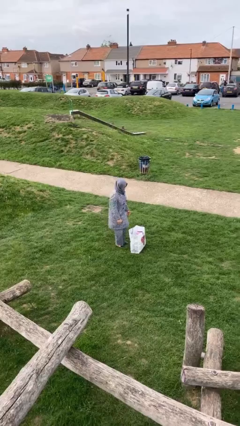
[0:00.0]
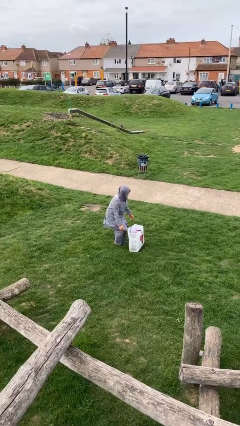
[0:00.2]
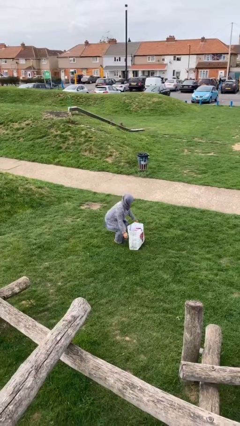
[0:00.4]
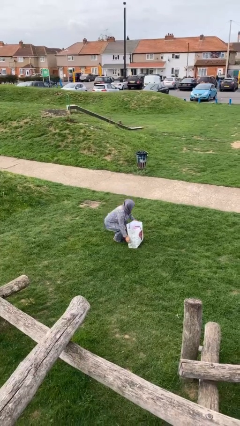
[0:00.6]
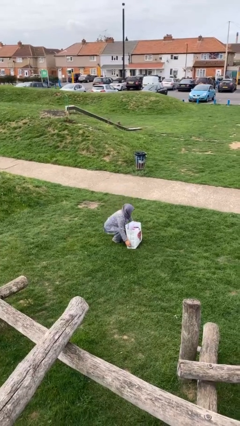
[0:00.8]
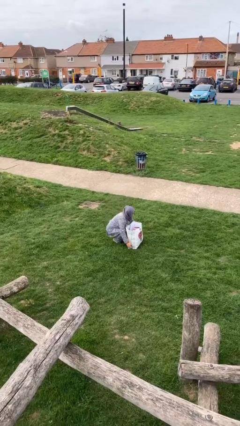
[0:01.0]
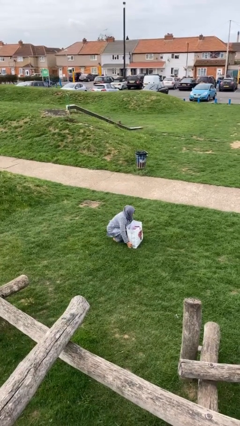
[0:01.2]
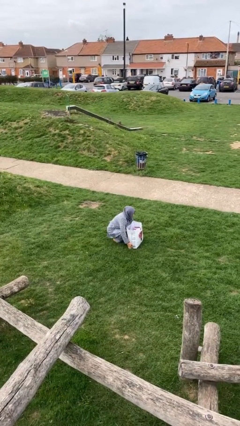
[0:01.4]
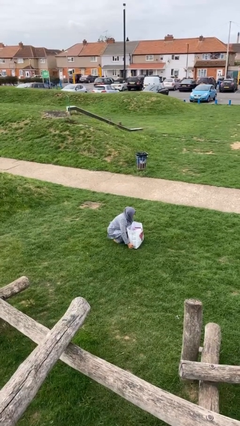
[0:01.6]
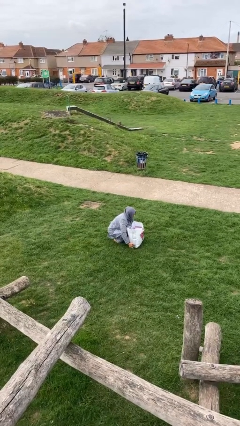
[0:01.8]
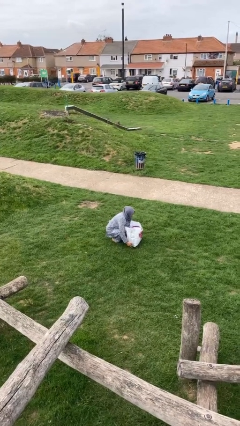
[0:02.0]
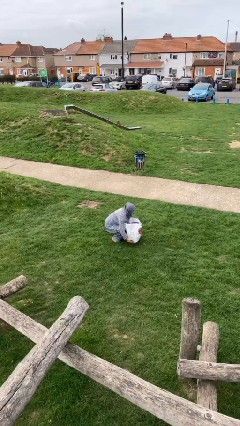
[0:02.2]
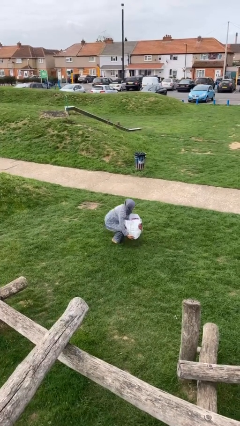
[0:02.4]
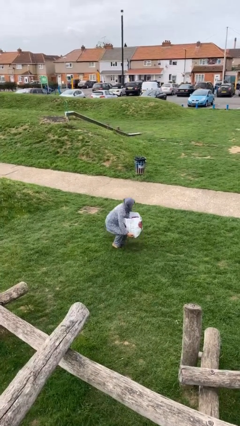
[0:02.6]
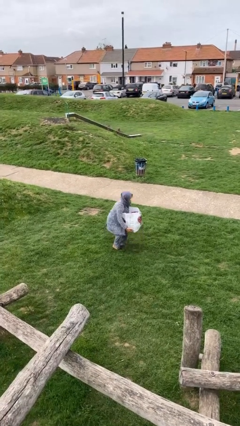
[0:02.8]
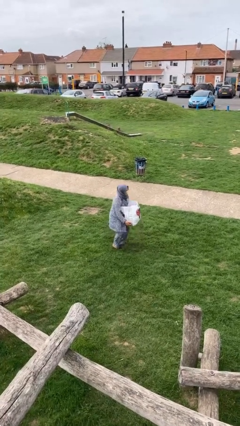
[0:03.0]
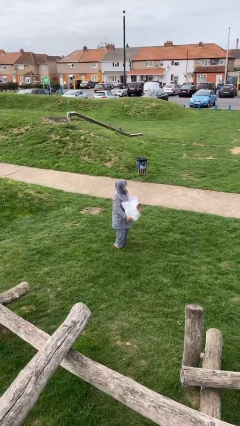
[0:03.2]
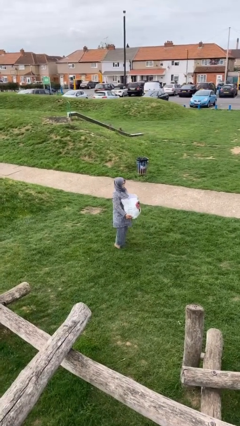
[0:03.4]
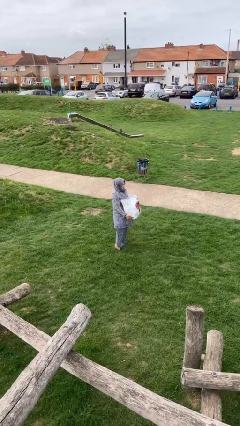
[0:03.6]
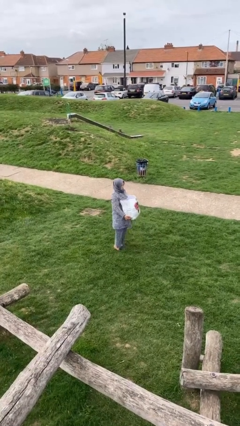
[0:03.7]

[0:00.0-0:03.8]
person picks up object from floor

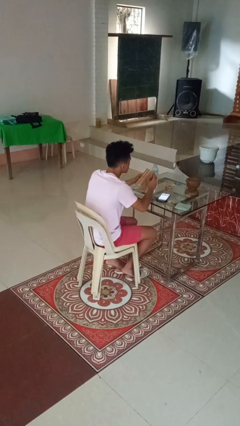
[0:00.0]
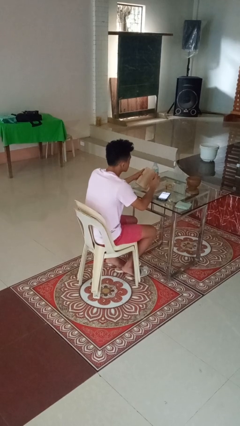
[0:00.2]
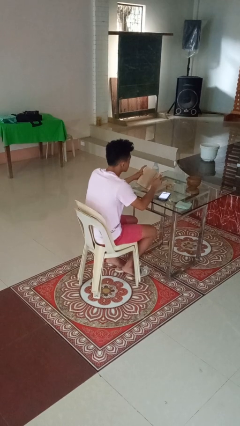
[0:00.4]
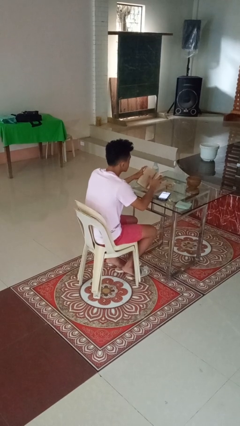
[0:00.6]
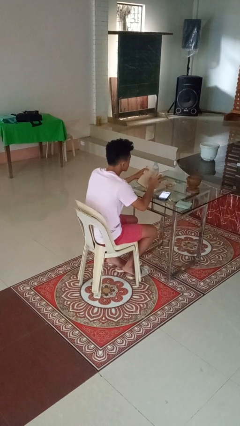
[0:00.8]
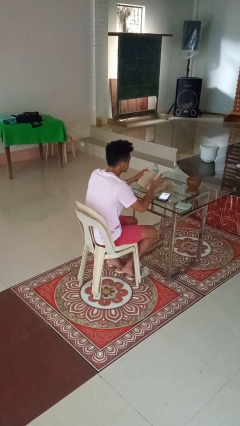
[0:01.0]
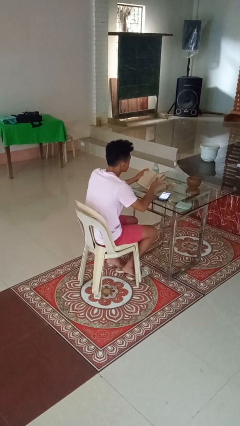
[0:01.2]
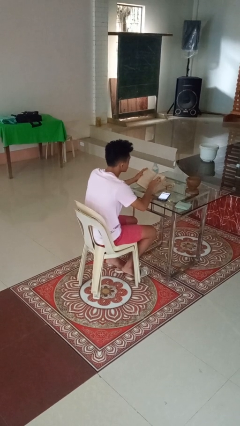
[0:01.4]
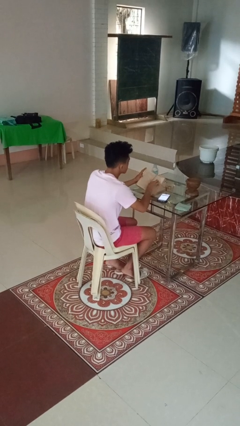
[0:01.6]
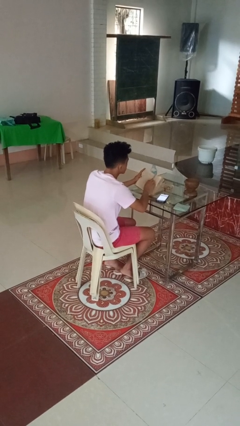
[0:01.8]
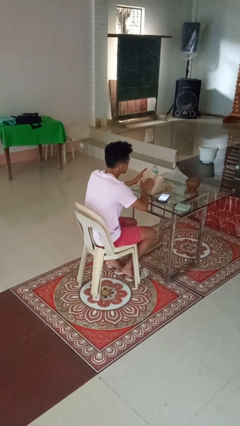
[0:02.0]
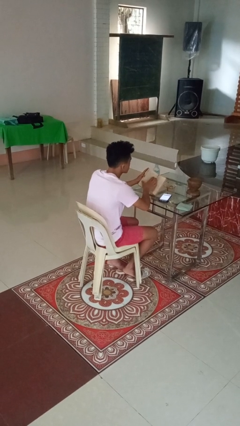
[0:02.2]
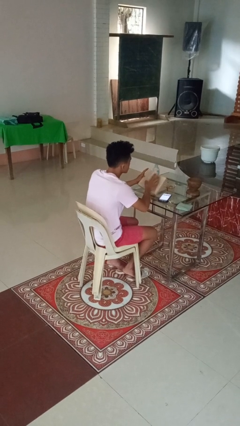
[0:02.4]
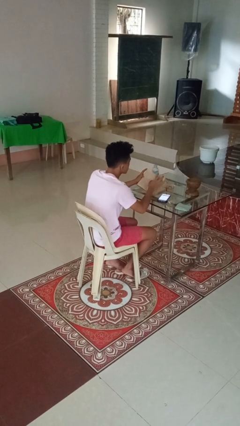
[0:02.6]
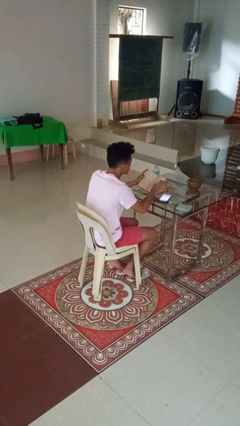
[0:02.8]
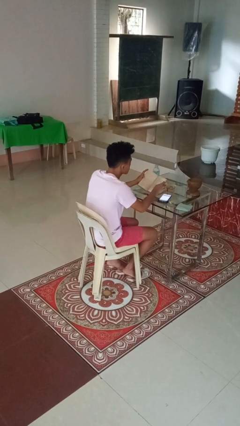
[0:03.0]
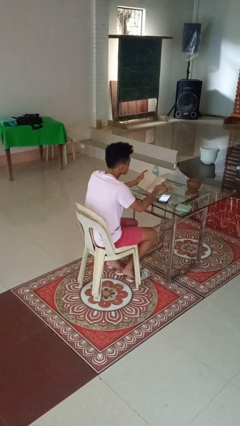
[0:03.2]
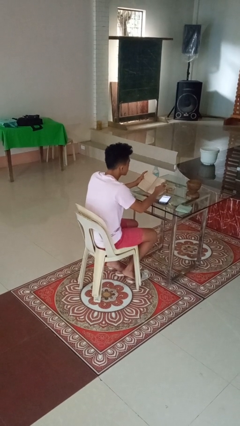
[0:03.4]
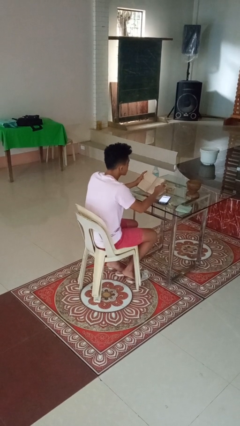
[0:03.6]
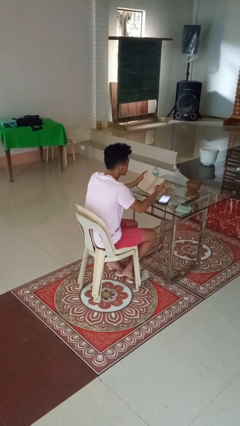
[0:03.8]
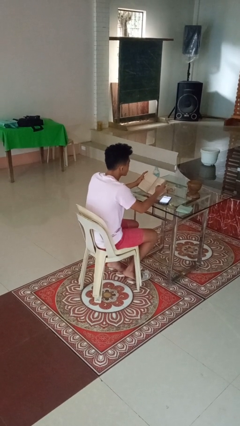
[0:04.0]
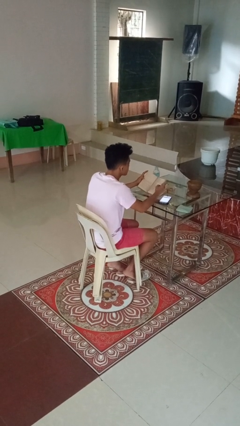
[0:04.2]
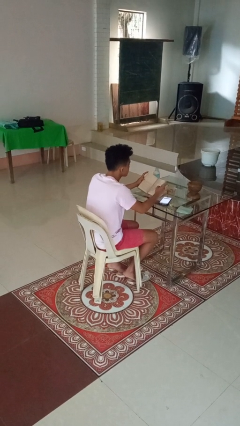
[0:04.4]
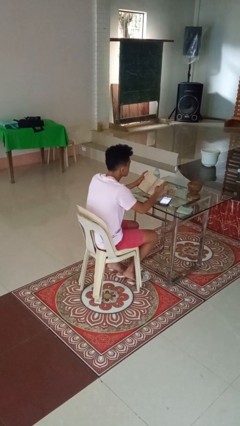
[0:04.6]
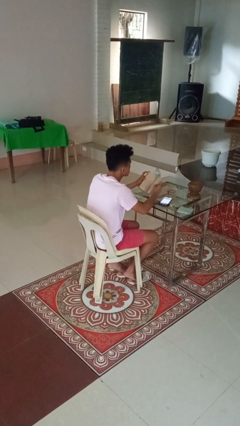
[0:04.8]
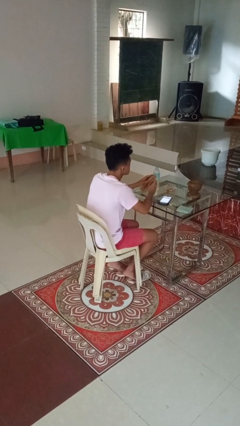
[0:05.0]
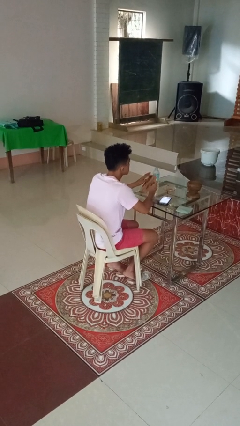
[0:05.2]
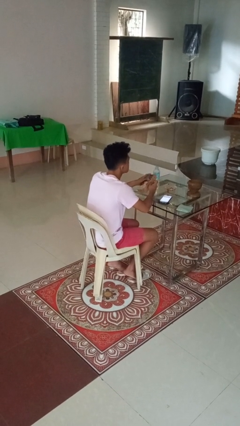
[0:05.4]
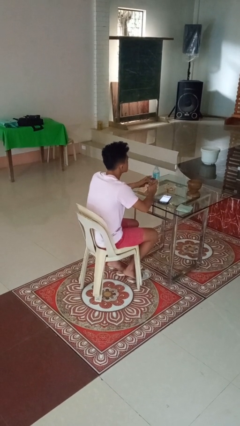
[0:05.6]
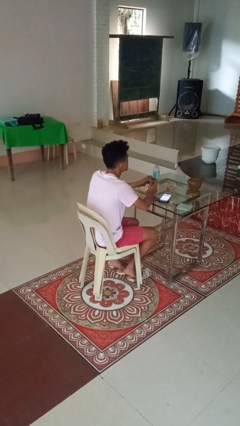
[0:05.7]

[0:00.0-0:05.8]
person reads book

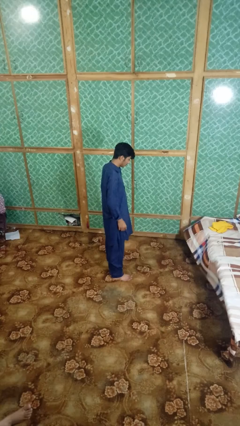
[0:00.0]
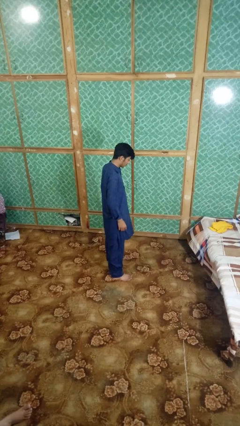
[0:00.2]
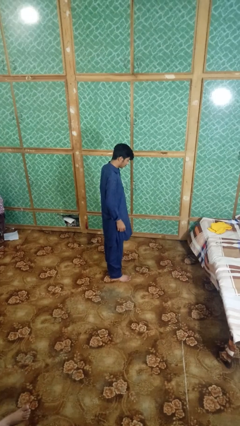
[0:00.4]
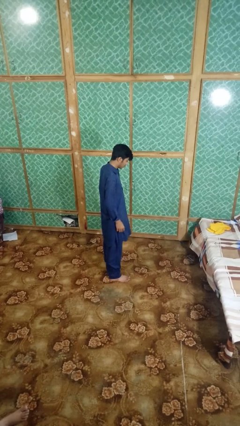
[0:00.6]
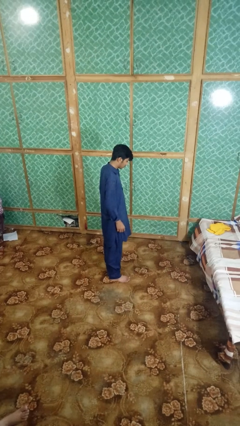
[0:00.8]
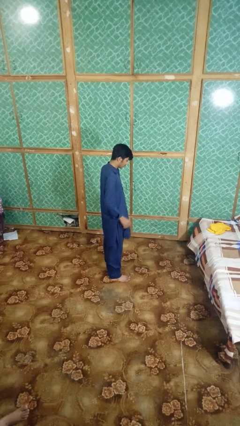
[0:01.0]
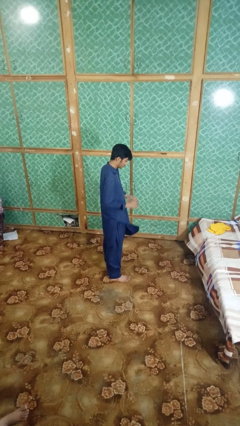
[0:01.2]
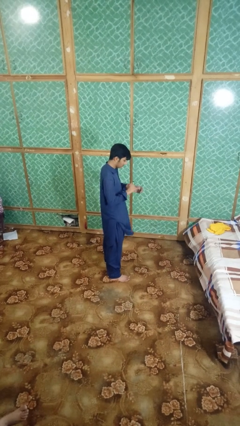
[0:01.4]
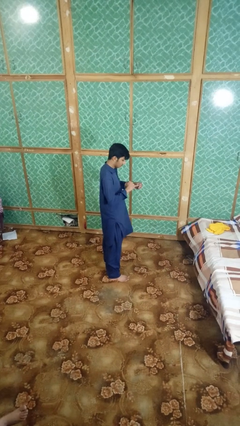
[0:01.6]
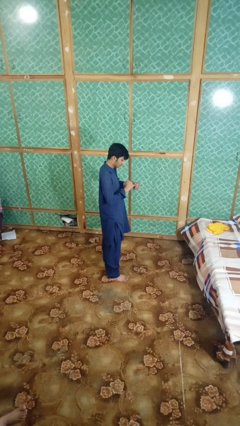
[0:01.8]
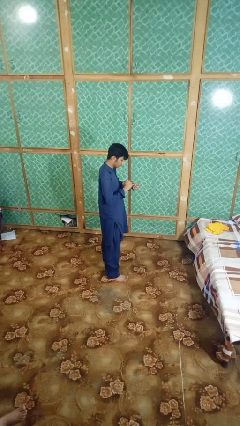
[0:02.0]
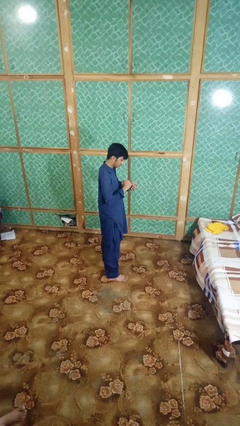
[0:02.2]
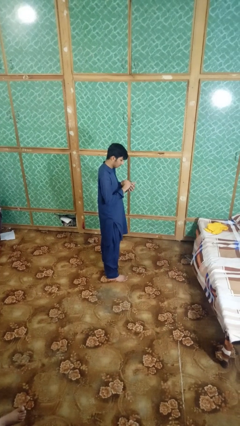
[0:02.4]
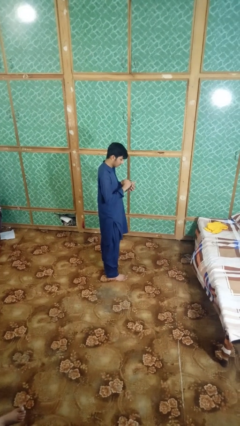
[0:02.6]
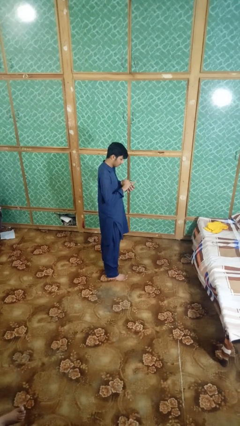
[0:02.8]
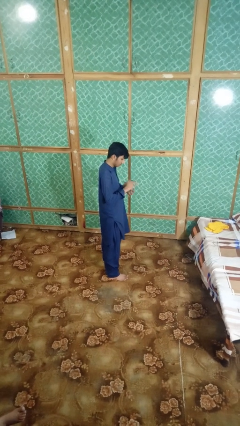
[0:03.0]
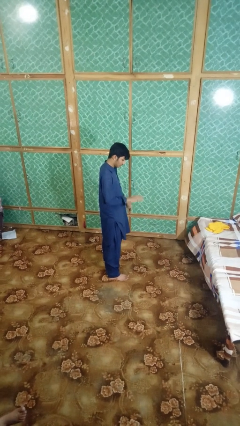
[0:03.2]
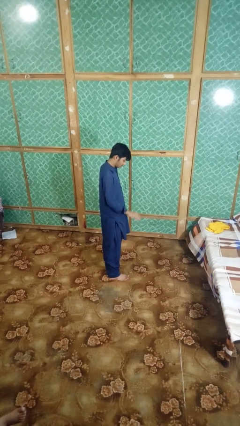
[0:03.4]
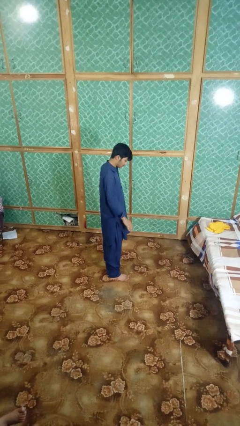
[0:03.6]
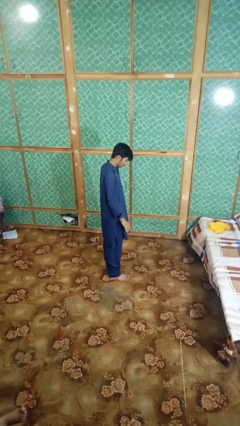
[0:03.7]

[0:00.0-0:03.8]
person puts on ring

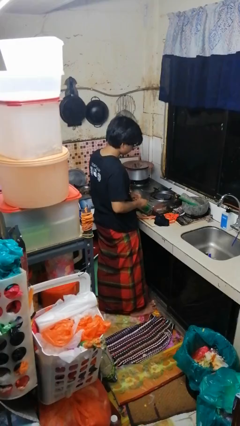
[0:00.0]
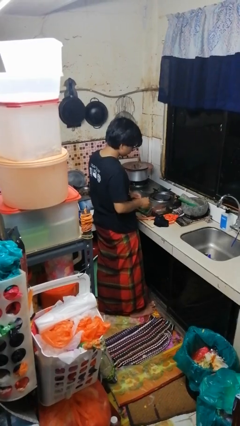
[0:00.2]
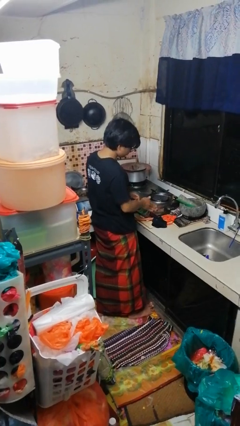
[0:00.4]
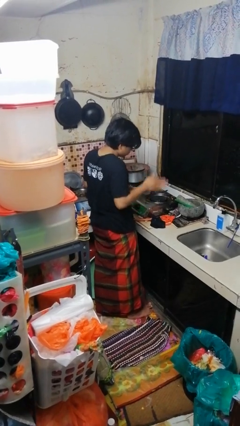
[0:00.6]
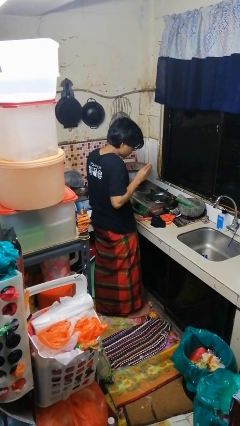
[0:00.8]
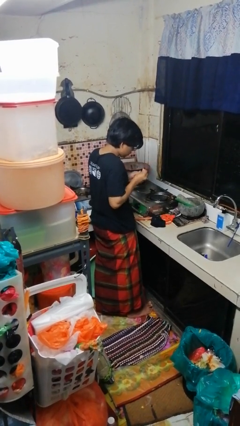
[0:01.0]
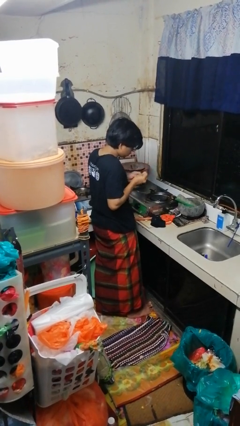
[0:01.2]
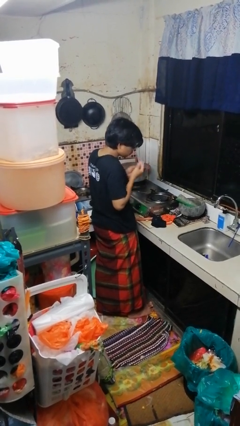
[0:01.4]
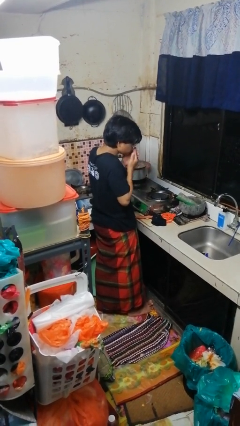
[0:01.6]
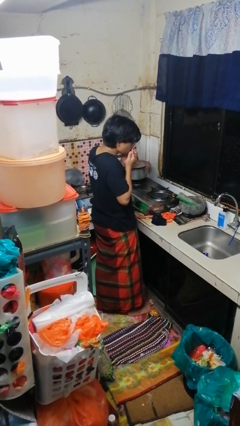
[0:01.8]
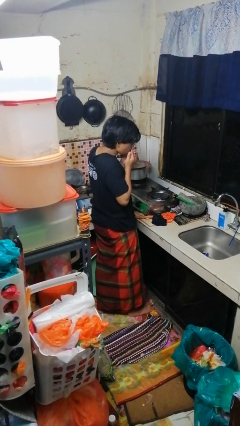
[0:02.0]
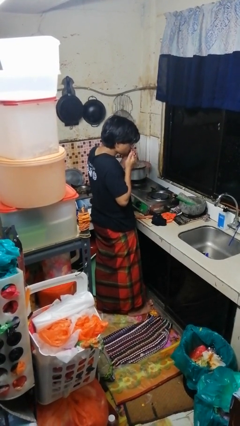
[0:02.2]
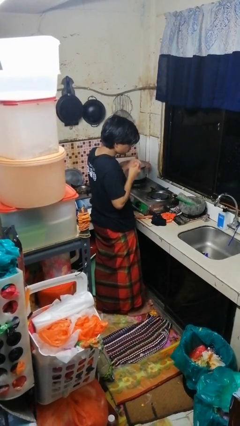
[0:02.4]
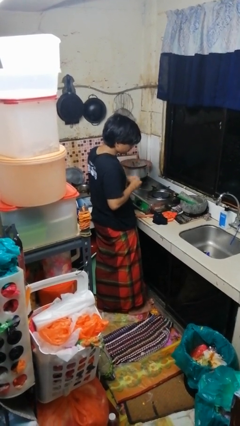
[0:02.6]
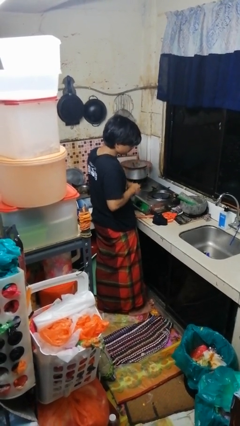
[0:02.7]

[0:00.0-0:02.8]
person burns hand

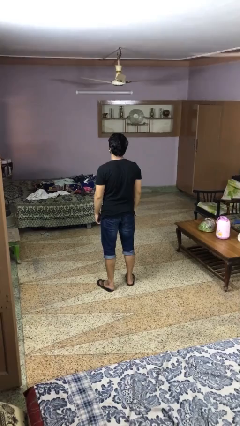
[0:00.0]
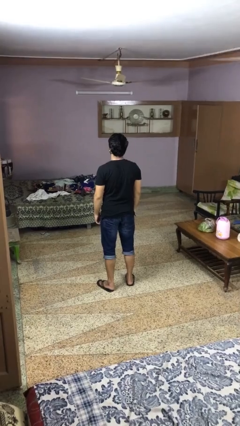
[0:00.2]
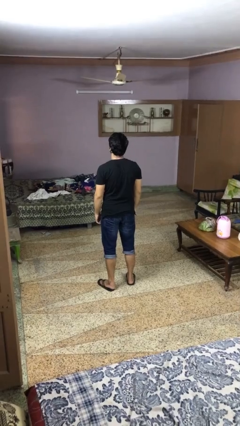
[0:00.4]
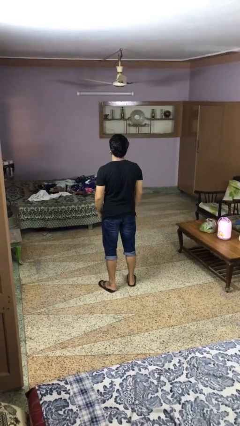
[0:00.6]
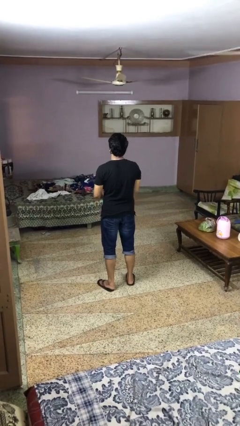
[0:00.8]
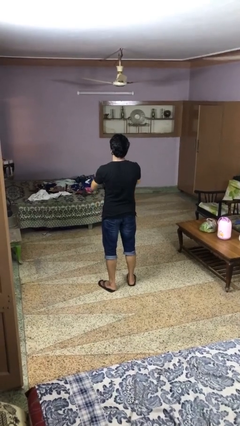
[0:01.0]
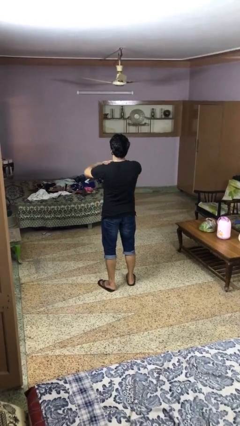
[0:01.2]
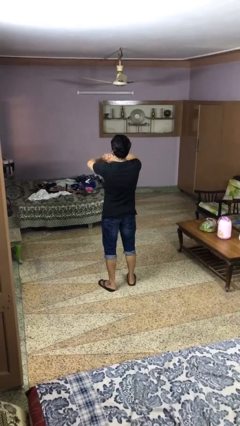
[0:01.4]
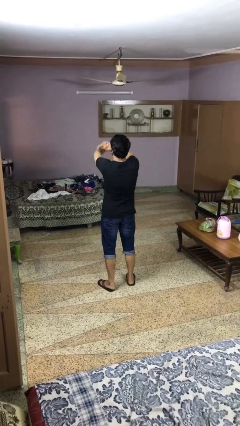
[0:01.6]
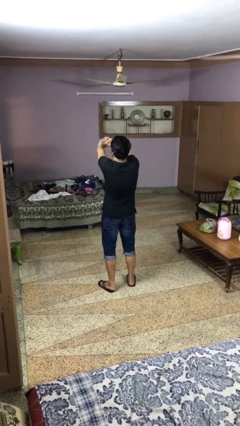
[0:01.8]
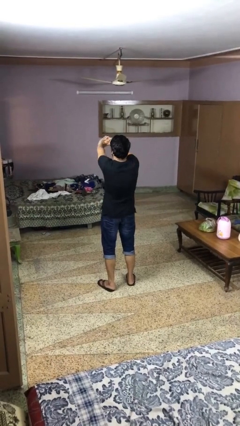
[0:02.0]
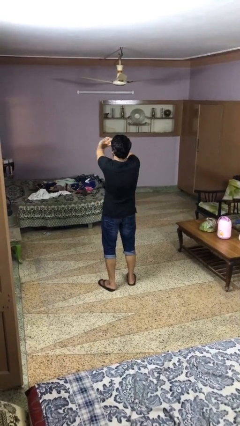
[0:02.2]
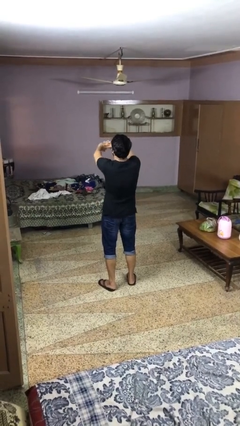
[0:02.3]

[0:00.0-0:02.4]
person cracks knuckles
